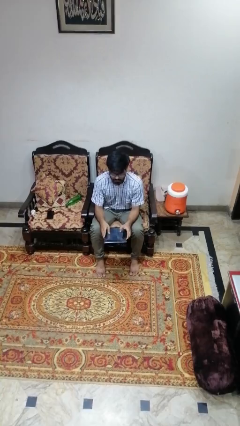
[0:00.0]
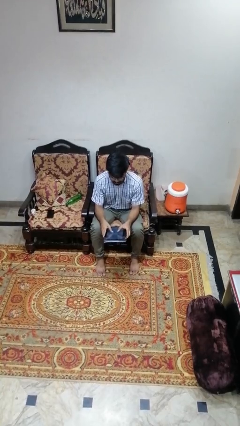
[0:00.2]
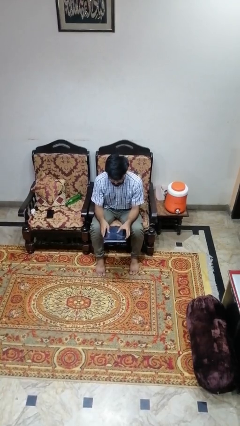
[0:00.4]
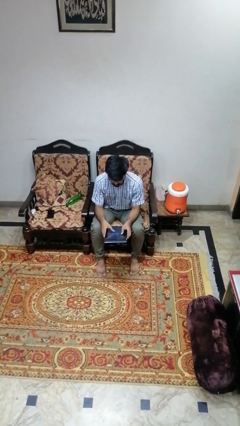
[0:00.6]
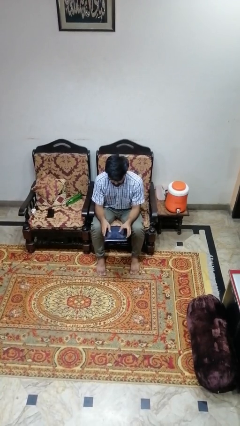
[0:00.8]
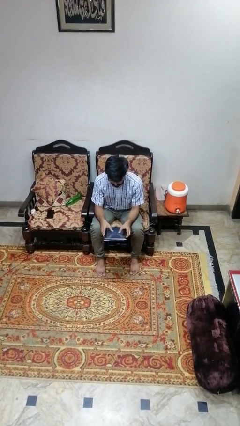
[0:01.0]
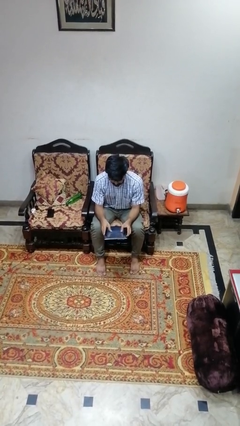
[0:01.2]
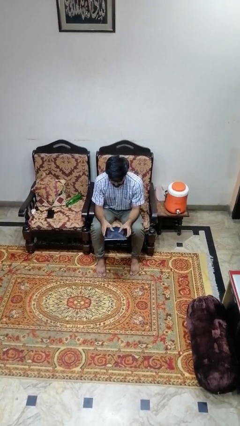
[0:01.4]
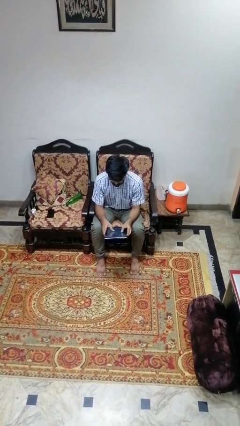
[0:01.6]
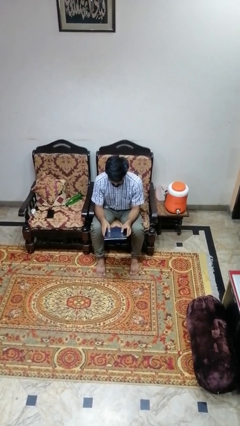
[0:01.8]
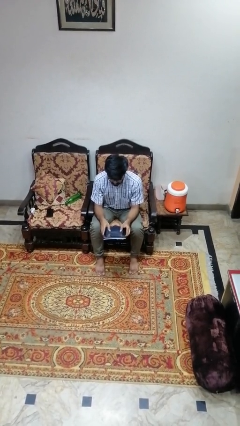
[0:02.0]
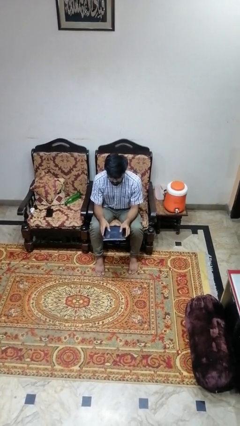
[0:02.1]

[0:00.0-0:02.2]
person interacts with tablet

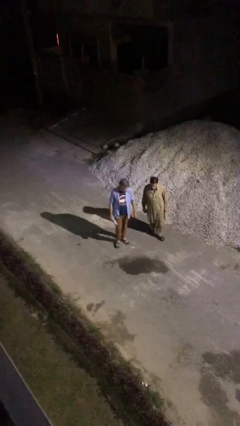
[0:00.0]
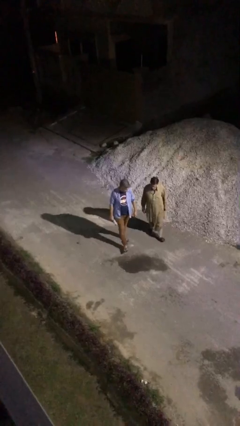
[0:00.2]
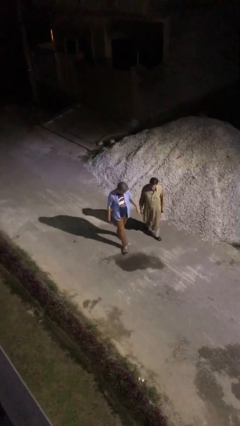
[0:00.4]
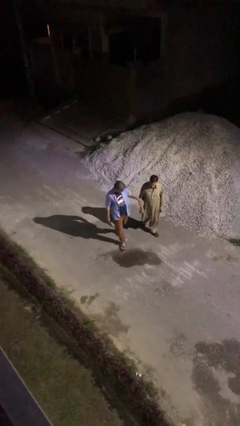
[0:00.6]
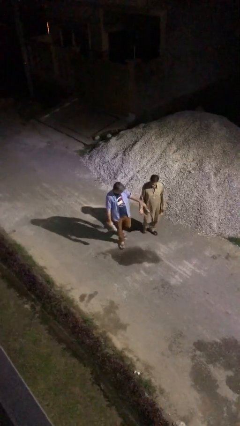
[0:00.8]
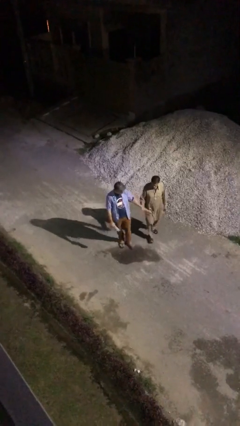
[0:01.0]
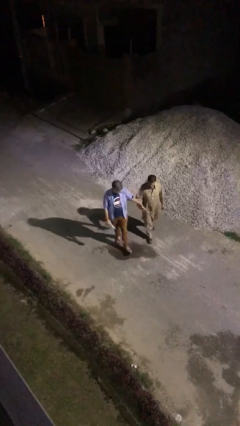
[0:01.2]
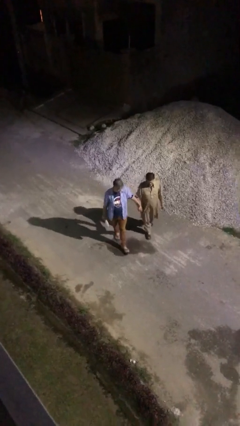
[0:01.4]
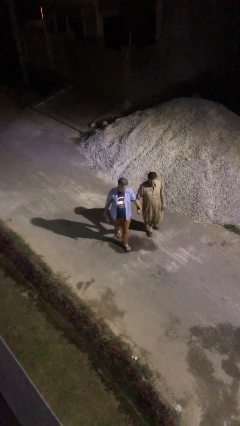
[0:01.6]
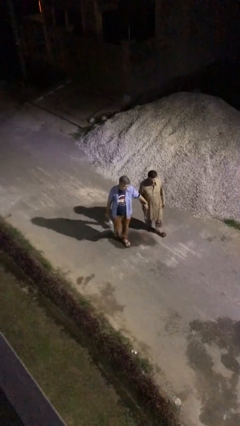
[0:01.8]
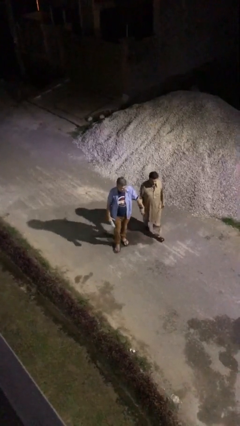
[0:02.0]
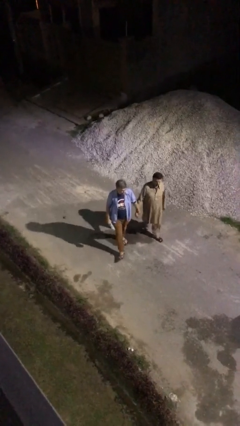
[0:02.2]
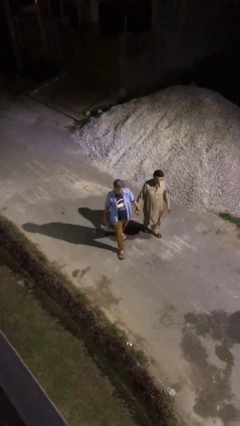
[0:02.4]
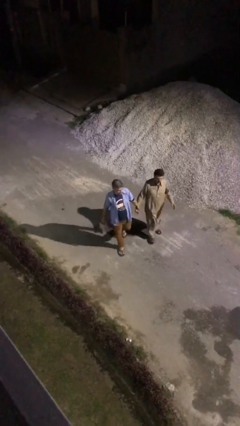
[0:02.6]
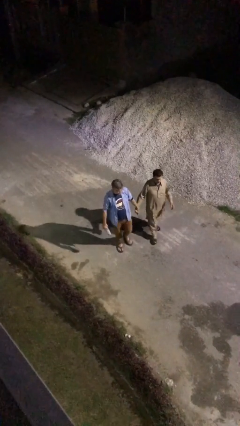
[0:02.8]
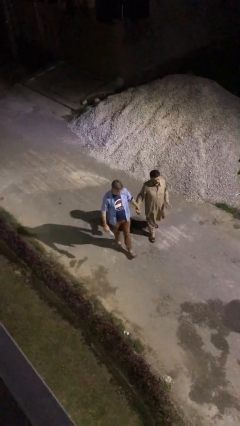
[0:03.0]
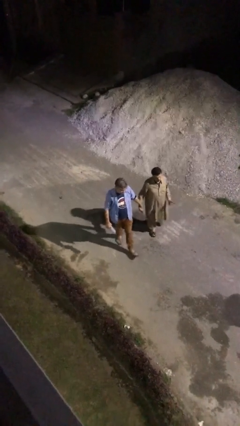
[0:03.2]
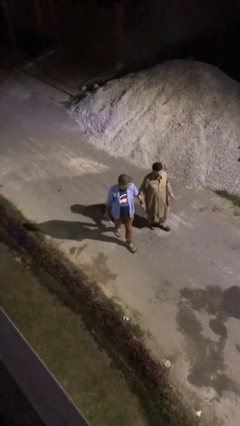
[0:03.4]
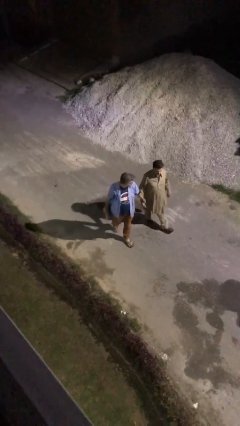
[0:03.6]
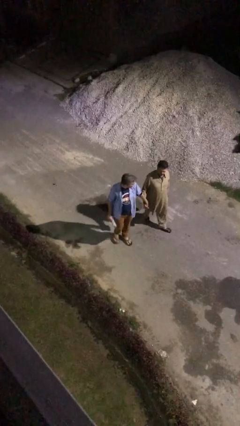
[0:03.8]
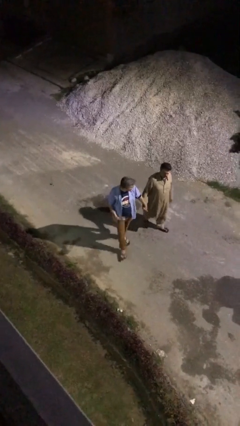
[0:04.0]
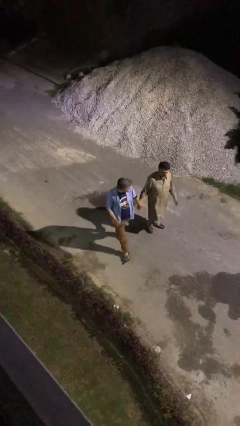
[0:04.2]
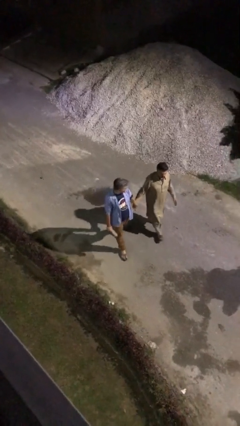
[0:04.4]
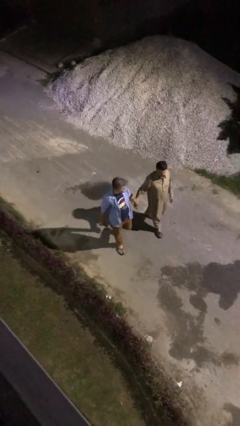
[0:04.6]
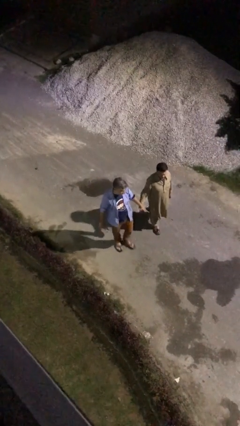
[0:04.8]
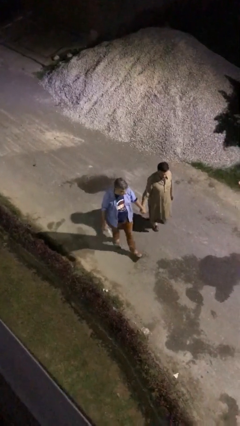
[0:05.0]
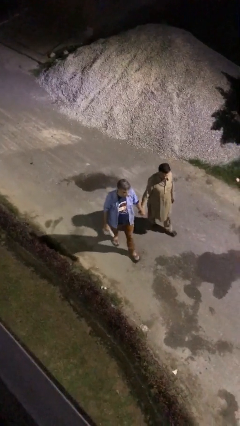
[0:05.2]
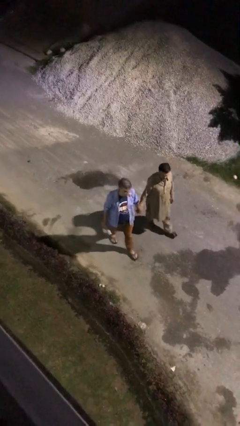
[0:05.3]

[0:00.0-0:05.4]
person holds hand

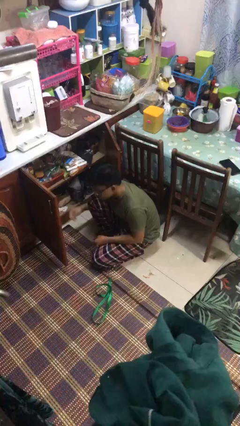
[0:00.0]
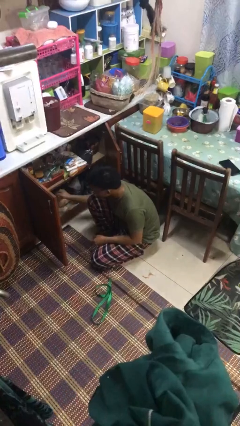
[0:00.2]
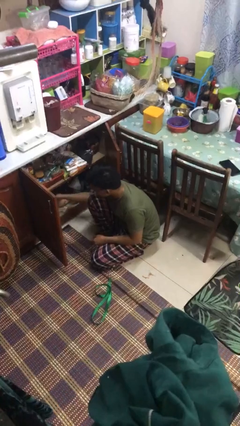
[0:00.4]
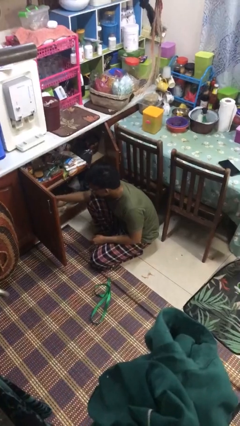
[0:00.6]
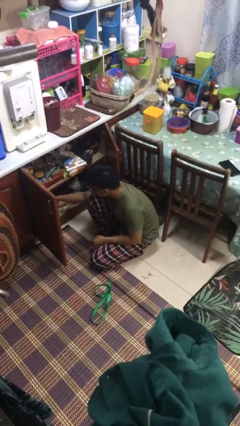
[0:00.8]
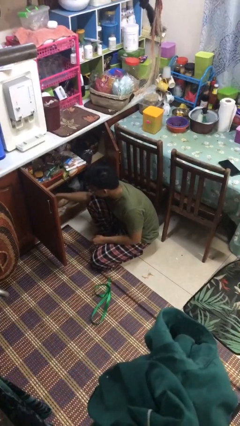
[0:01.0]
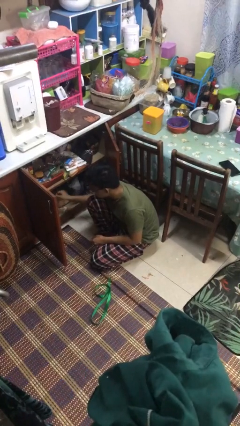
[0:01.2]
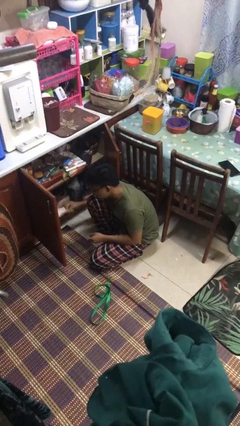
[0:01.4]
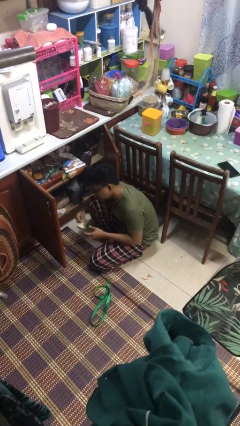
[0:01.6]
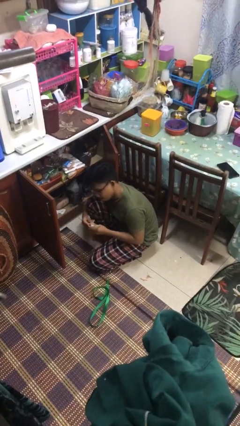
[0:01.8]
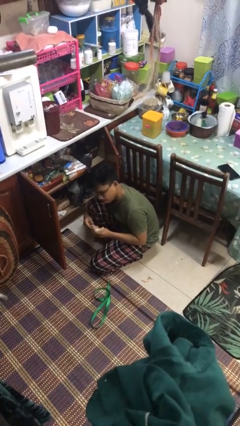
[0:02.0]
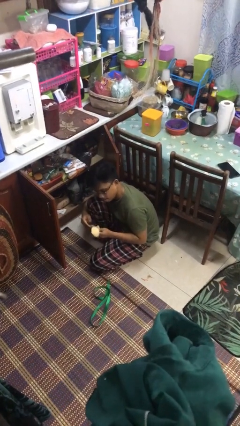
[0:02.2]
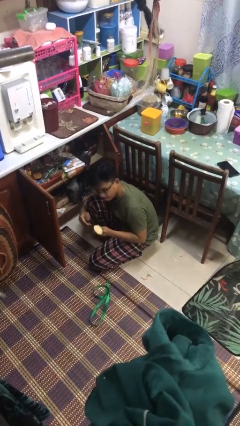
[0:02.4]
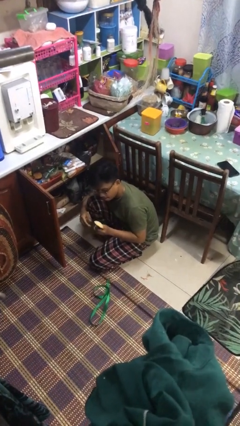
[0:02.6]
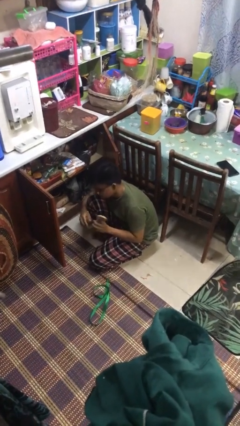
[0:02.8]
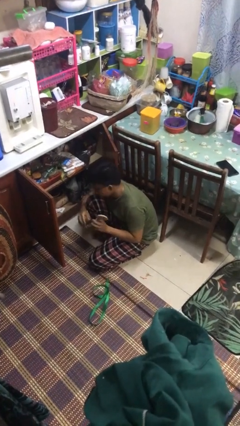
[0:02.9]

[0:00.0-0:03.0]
person takes object from kitchen drawer

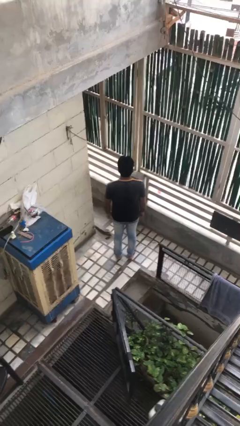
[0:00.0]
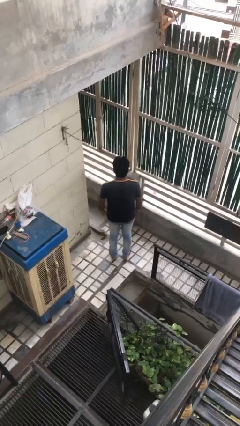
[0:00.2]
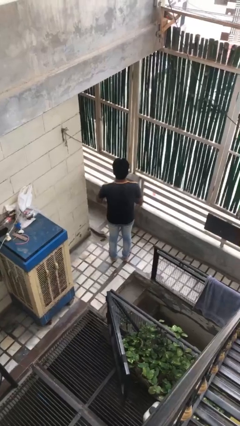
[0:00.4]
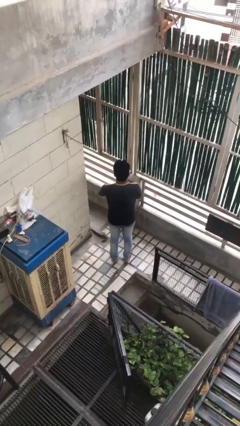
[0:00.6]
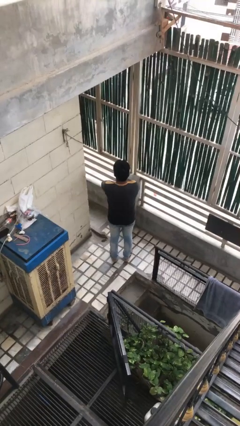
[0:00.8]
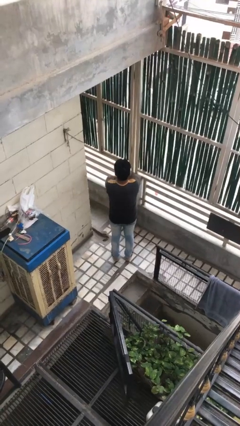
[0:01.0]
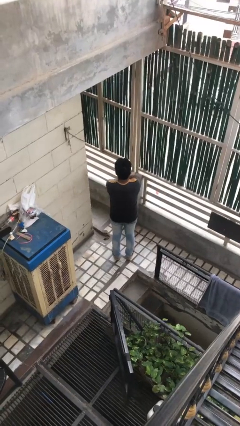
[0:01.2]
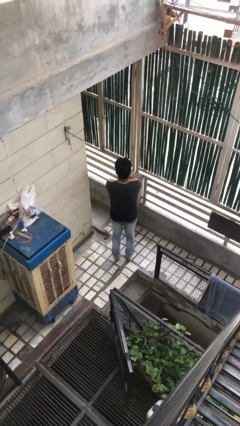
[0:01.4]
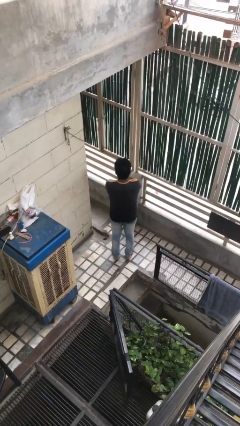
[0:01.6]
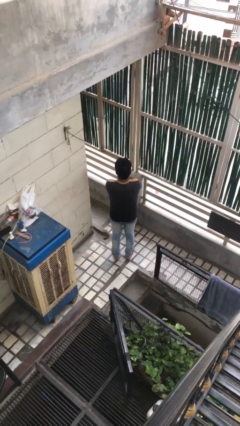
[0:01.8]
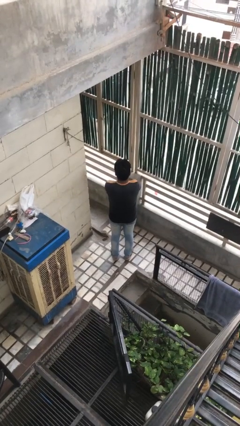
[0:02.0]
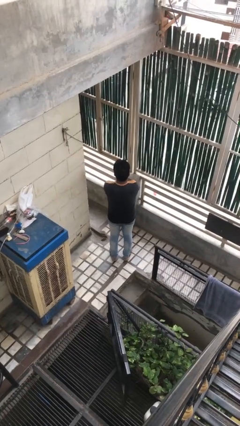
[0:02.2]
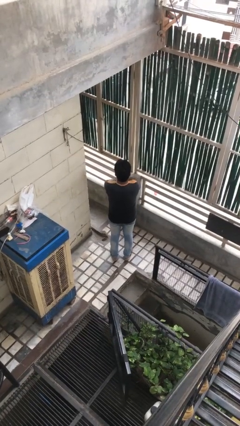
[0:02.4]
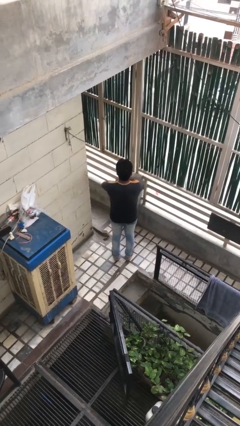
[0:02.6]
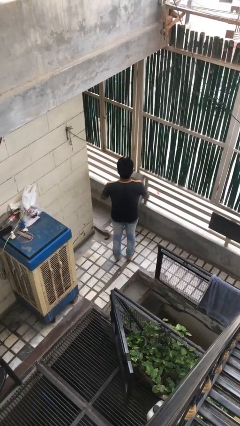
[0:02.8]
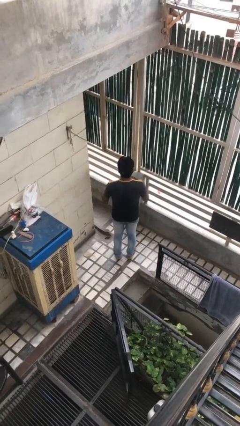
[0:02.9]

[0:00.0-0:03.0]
person crosses arms

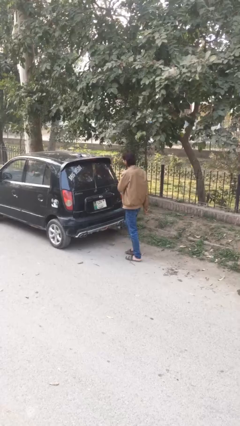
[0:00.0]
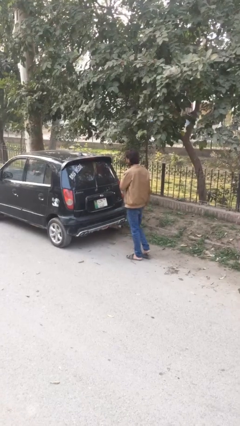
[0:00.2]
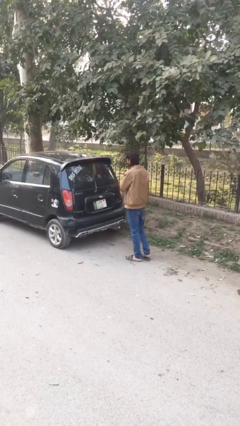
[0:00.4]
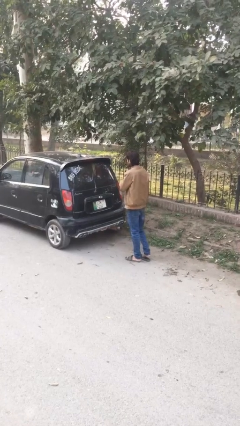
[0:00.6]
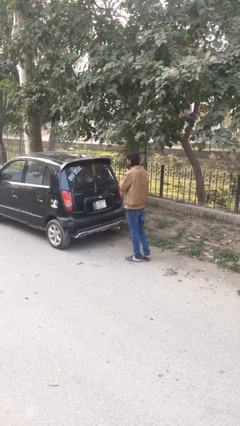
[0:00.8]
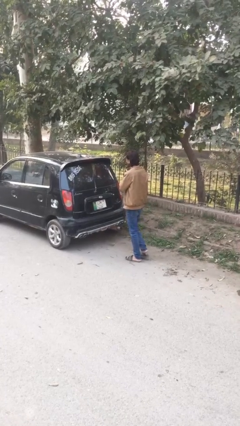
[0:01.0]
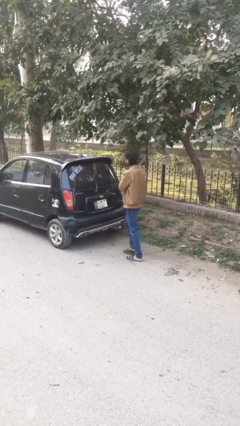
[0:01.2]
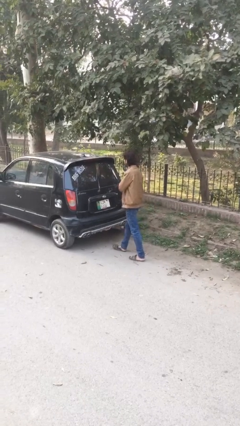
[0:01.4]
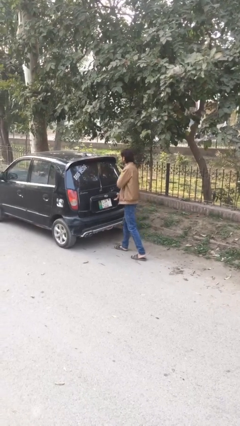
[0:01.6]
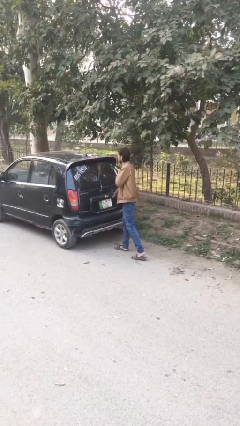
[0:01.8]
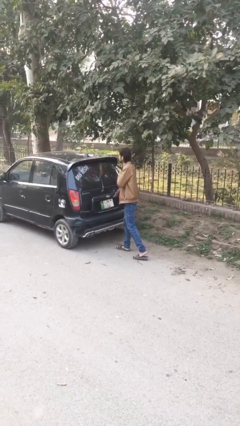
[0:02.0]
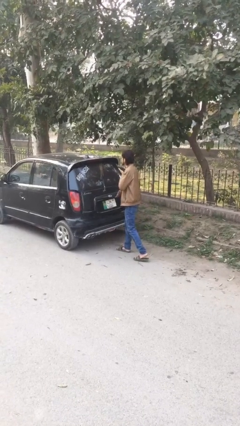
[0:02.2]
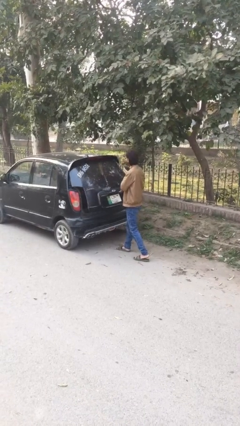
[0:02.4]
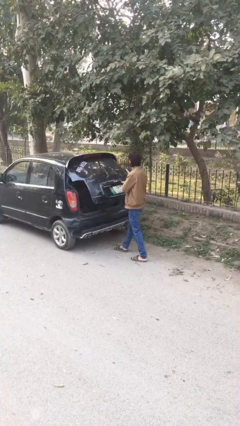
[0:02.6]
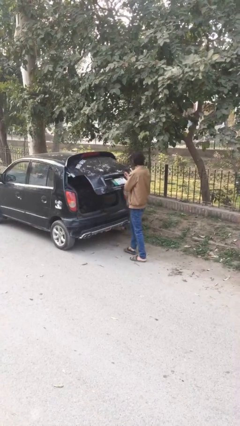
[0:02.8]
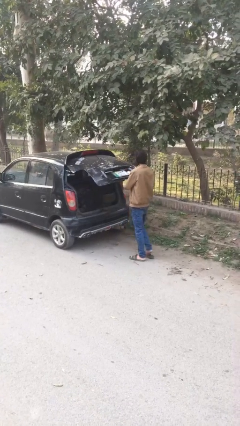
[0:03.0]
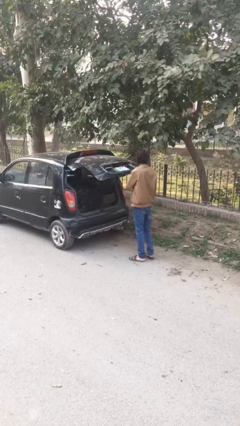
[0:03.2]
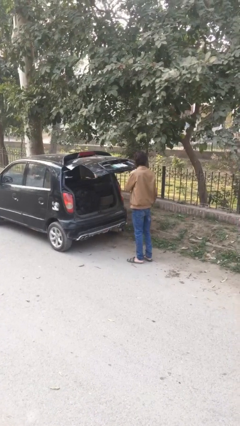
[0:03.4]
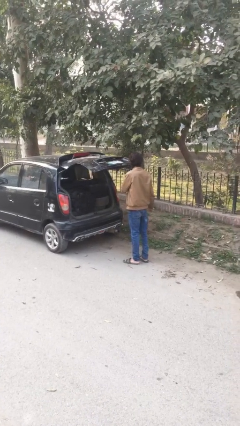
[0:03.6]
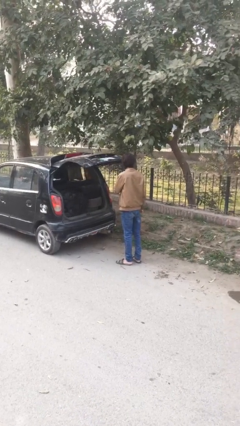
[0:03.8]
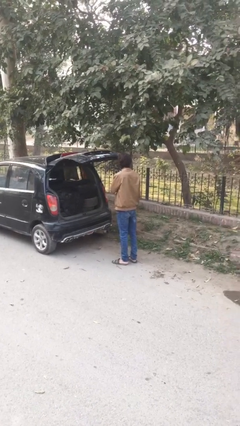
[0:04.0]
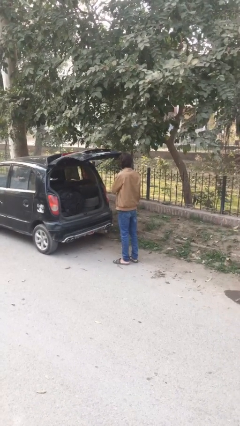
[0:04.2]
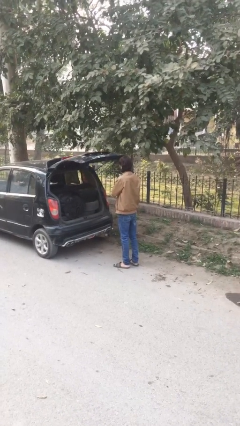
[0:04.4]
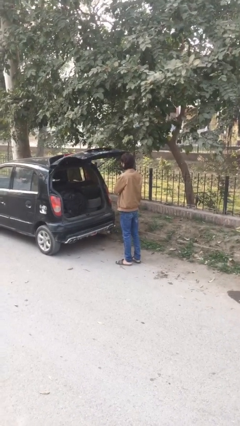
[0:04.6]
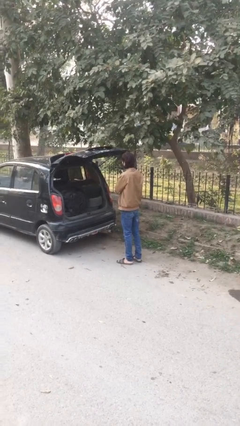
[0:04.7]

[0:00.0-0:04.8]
person opens car trunk
